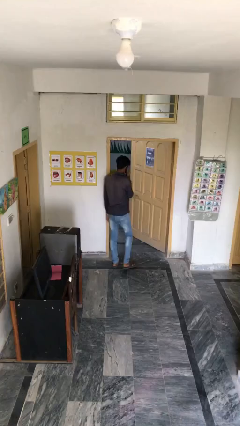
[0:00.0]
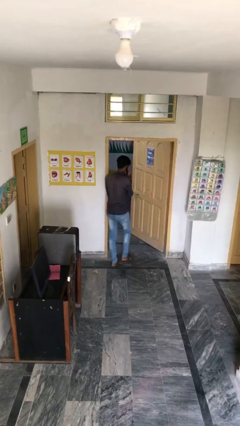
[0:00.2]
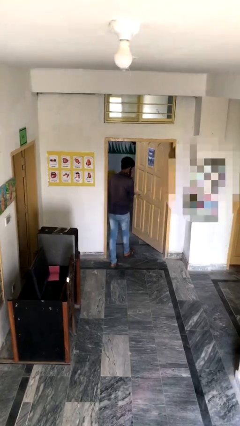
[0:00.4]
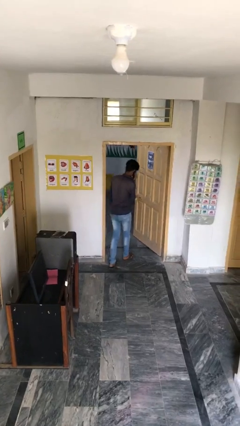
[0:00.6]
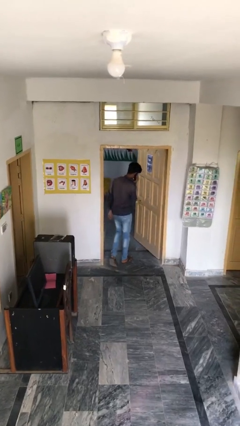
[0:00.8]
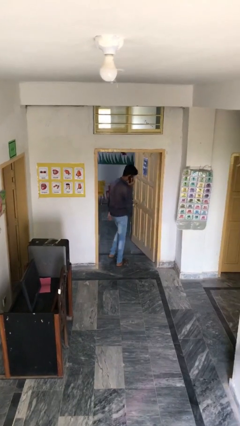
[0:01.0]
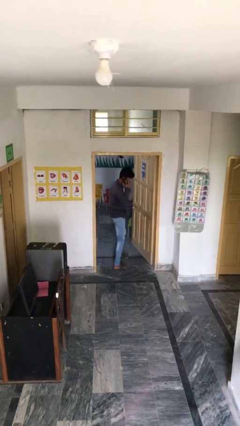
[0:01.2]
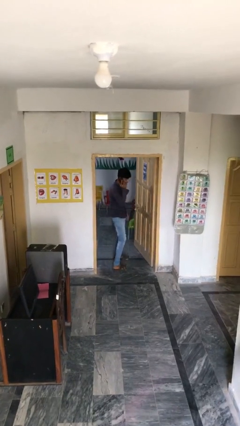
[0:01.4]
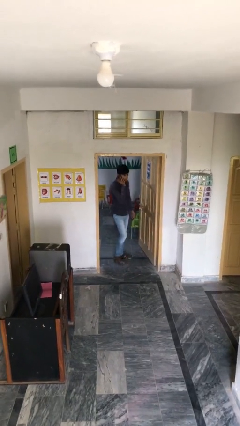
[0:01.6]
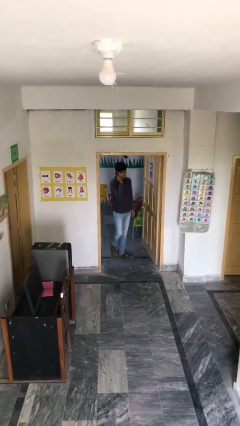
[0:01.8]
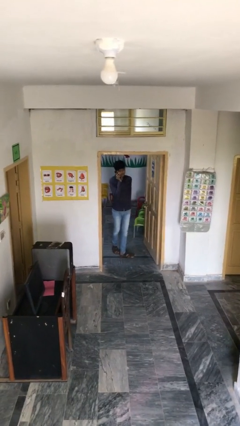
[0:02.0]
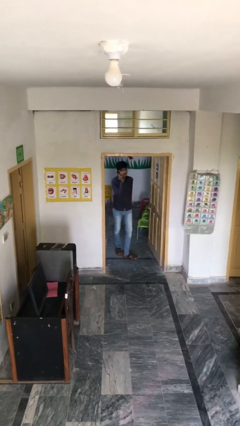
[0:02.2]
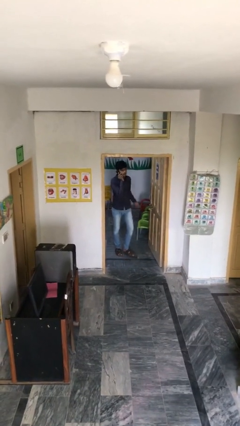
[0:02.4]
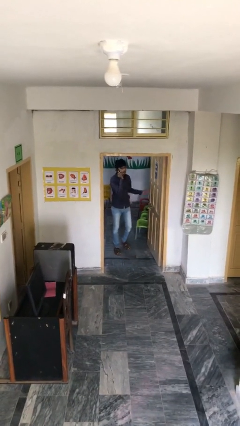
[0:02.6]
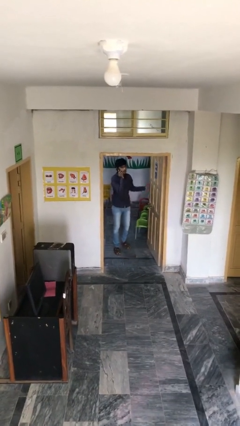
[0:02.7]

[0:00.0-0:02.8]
person exits scene through structure

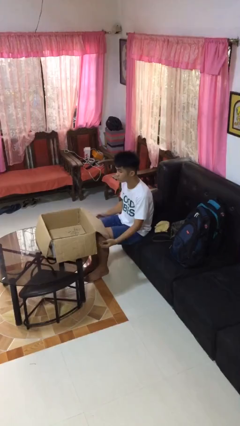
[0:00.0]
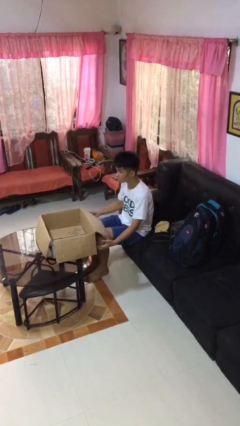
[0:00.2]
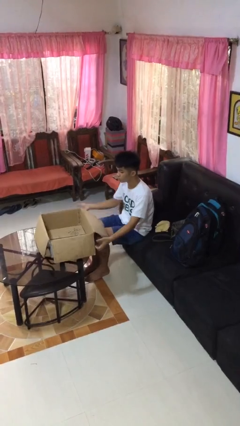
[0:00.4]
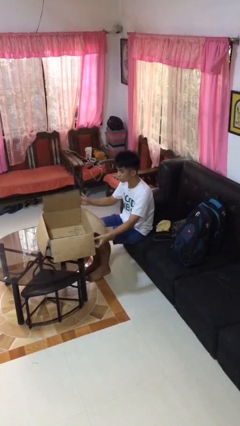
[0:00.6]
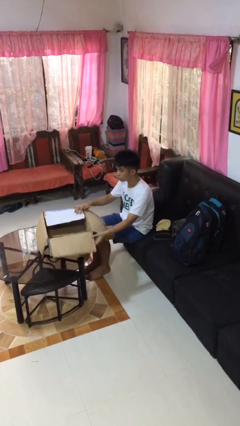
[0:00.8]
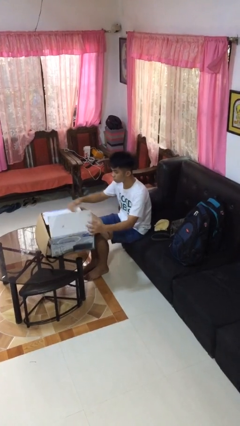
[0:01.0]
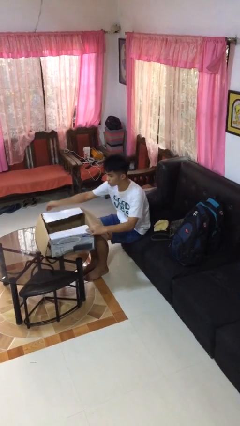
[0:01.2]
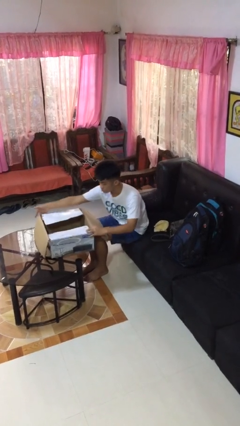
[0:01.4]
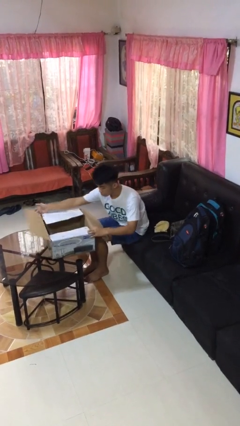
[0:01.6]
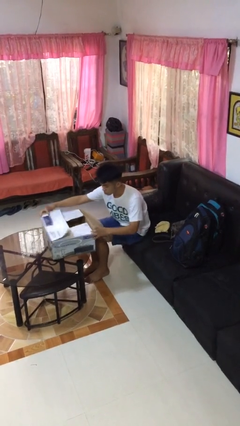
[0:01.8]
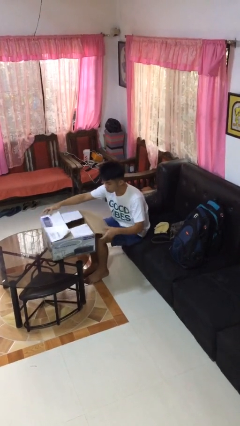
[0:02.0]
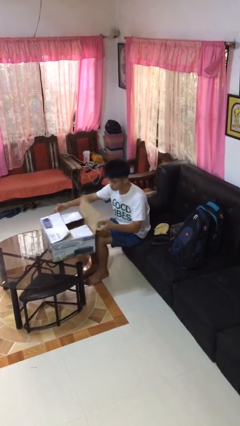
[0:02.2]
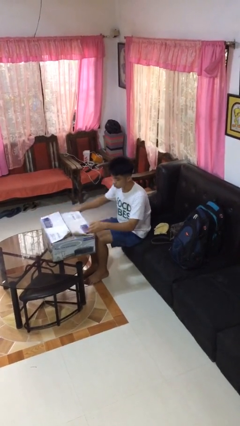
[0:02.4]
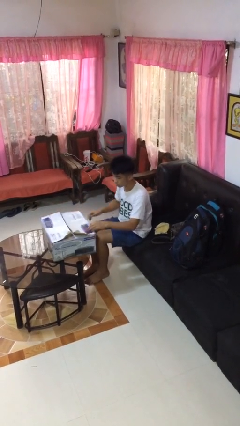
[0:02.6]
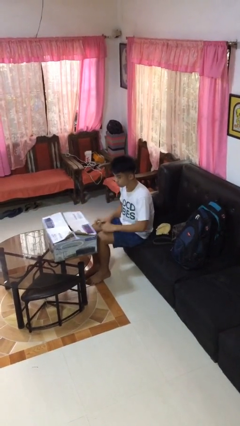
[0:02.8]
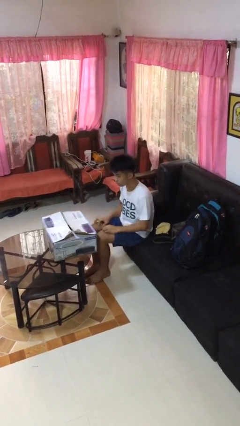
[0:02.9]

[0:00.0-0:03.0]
person closes box

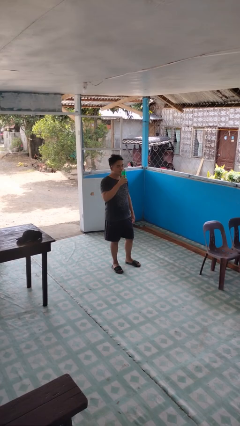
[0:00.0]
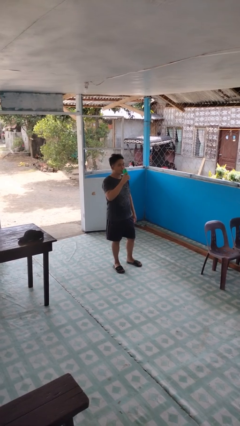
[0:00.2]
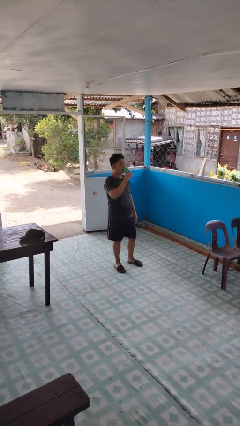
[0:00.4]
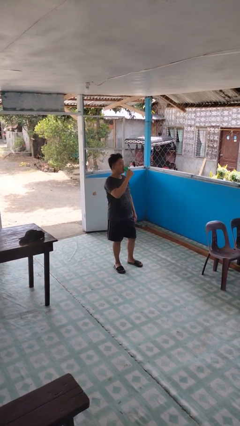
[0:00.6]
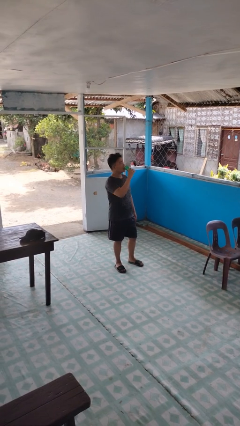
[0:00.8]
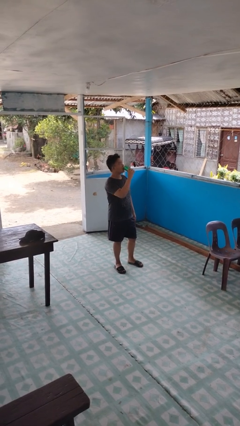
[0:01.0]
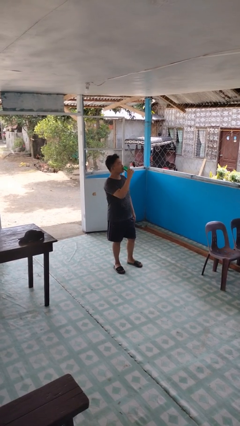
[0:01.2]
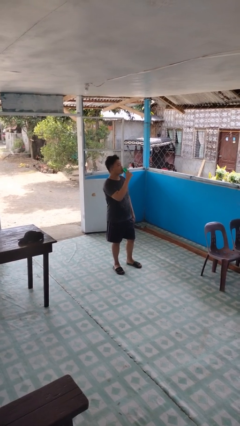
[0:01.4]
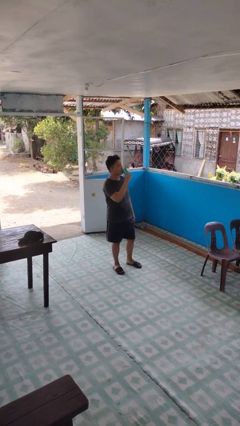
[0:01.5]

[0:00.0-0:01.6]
person drinks from beverage can

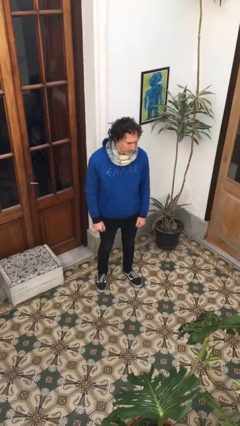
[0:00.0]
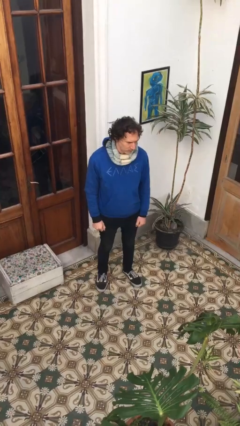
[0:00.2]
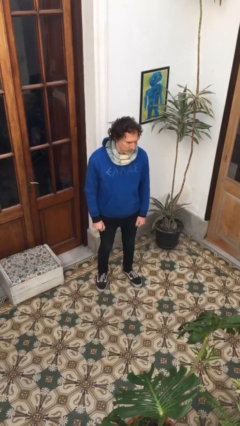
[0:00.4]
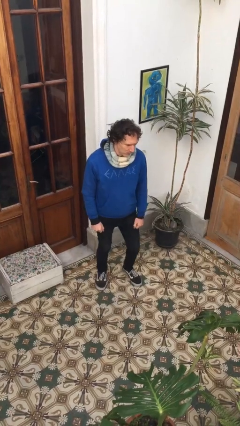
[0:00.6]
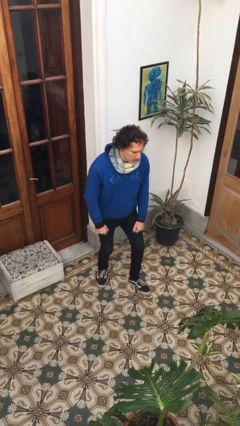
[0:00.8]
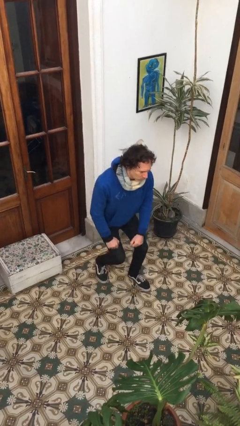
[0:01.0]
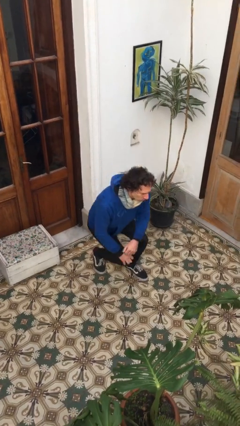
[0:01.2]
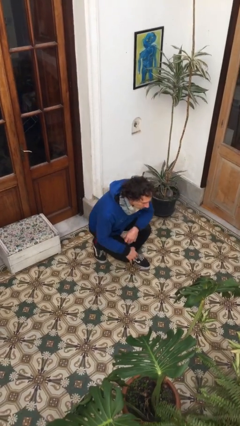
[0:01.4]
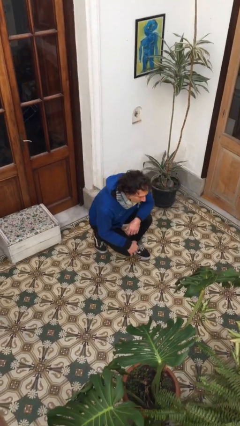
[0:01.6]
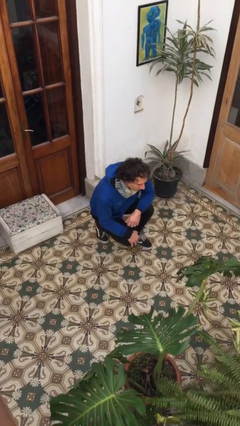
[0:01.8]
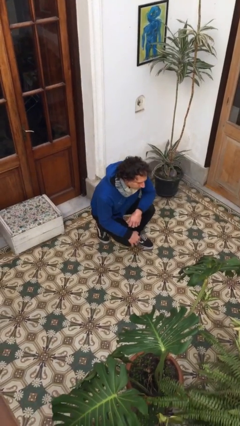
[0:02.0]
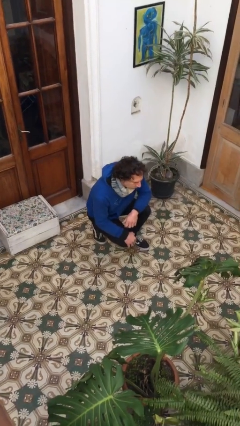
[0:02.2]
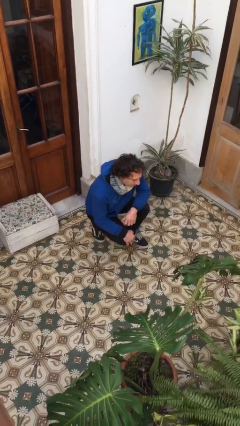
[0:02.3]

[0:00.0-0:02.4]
person squats

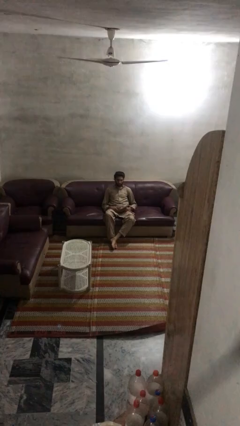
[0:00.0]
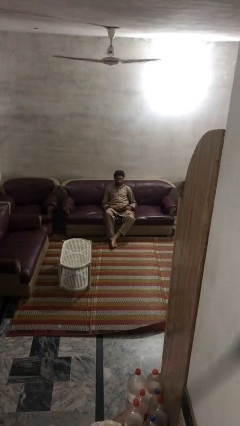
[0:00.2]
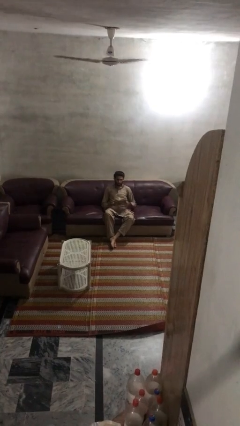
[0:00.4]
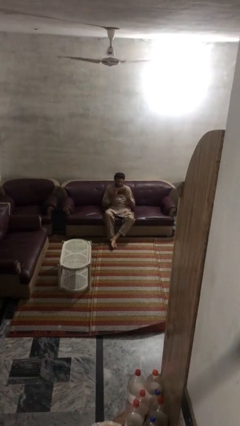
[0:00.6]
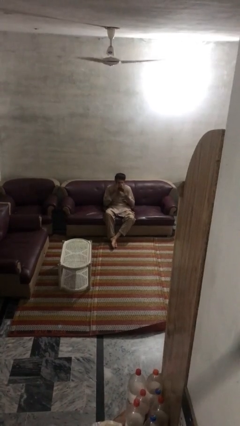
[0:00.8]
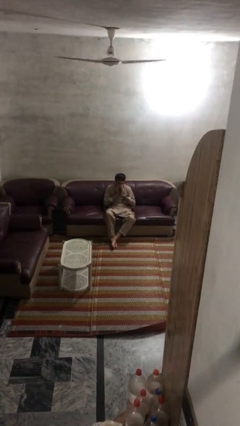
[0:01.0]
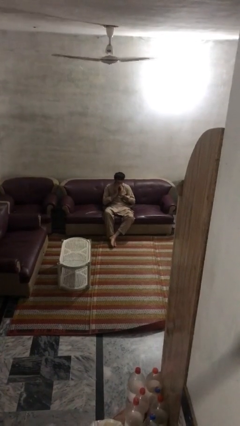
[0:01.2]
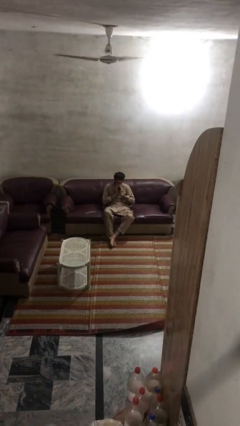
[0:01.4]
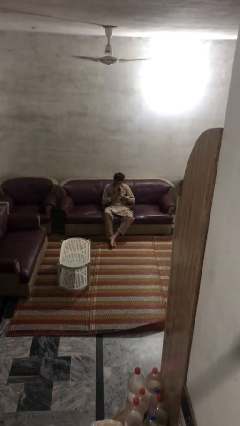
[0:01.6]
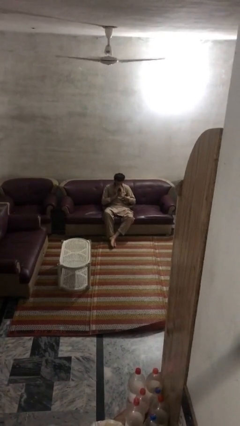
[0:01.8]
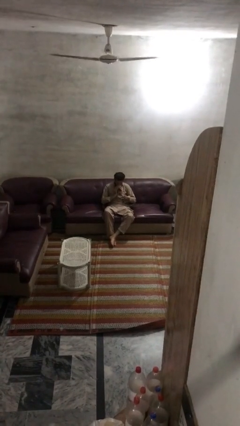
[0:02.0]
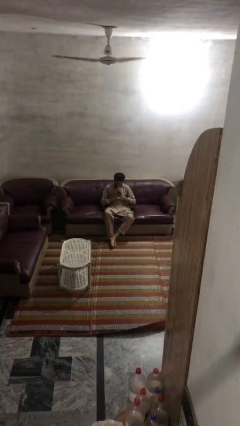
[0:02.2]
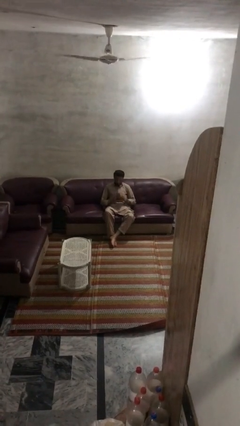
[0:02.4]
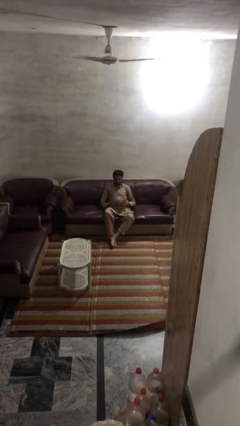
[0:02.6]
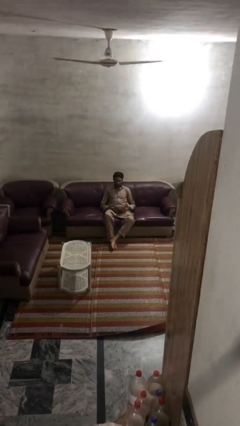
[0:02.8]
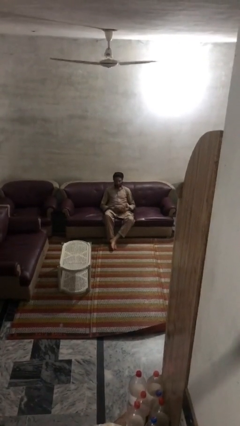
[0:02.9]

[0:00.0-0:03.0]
person blows nose

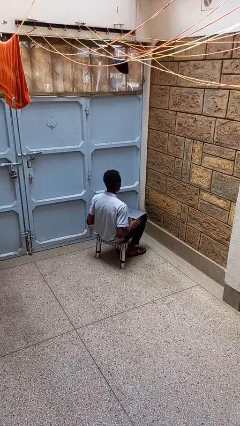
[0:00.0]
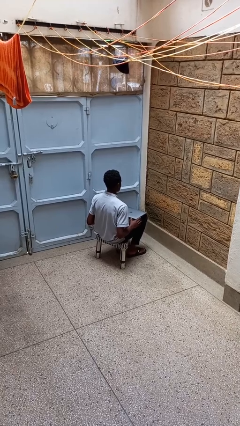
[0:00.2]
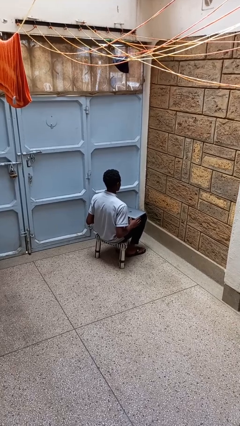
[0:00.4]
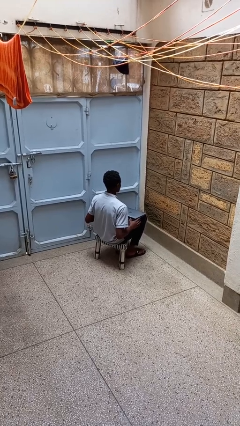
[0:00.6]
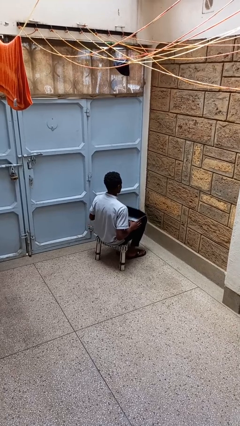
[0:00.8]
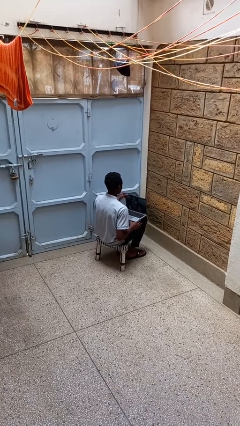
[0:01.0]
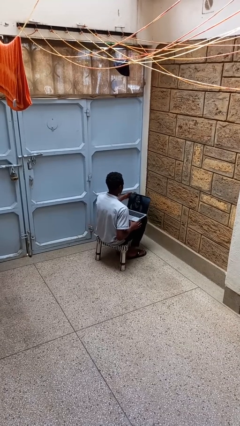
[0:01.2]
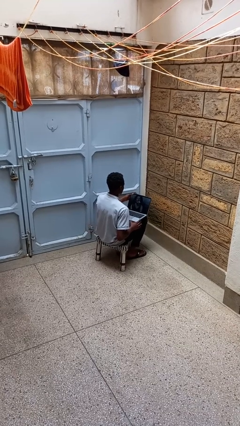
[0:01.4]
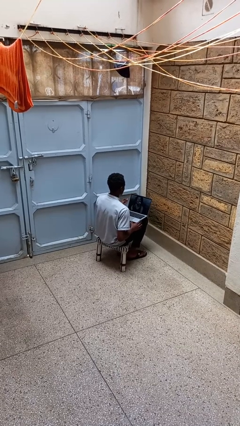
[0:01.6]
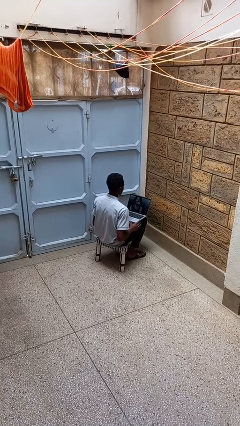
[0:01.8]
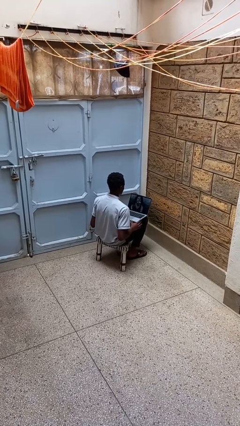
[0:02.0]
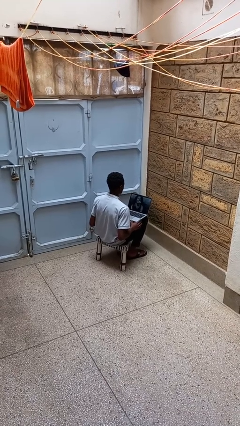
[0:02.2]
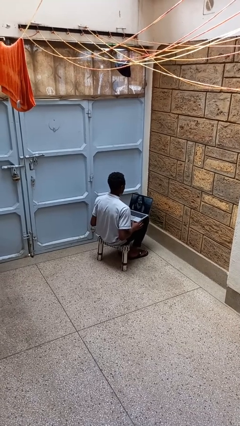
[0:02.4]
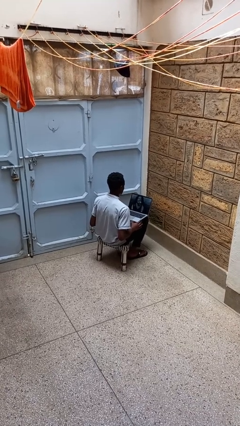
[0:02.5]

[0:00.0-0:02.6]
person opens laptop

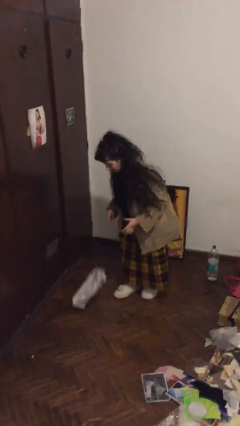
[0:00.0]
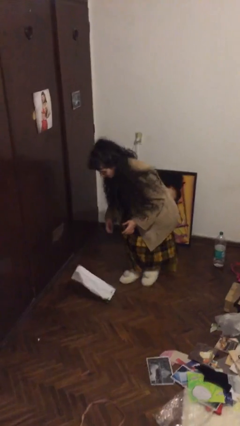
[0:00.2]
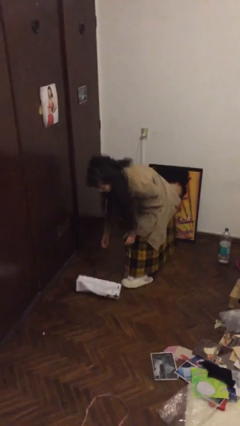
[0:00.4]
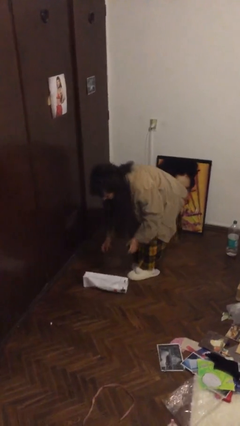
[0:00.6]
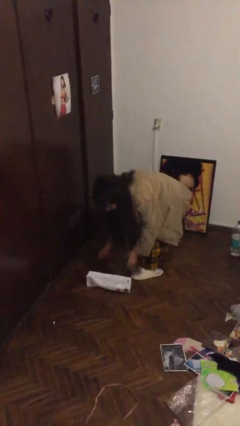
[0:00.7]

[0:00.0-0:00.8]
person drops object

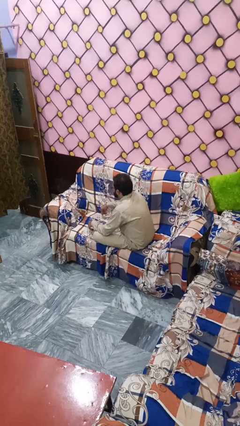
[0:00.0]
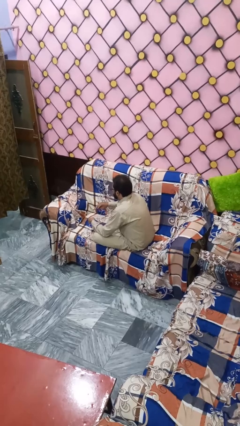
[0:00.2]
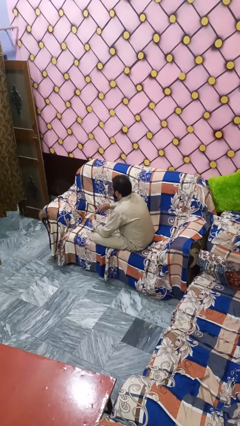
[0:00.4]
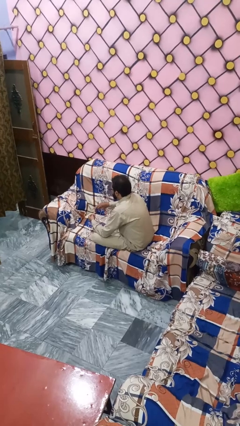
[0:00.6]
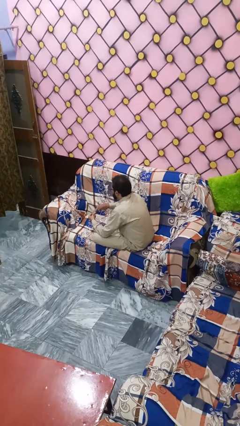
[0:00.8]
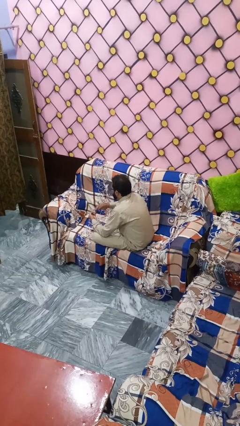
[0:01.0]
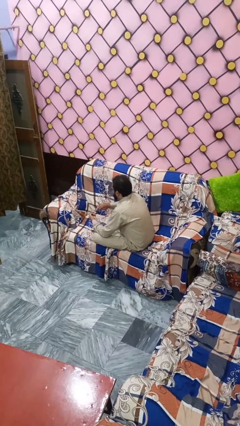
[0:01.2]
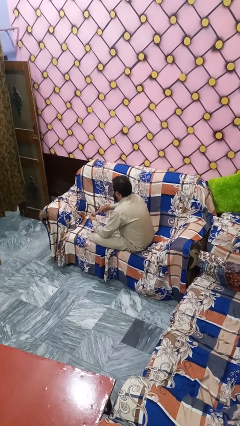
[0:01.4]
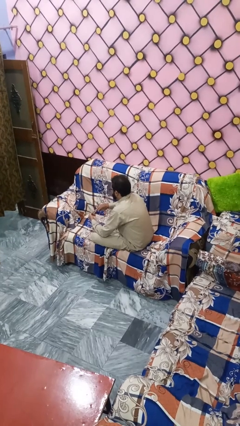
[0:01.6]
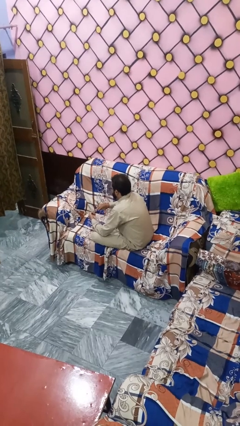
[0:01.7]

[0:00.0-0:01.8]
person paints fingernails
